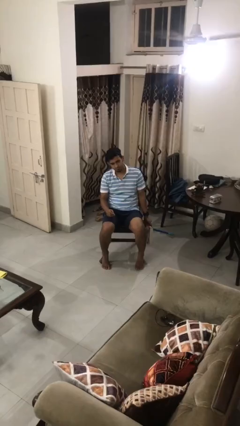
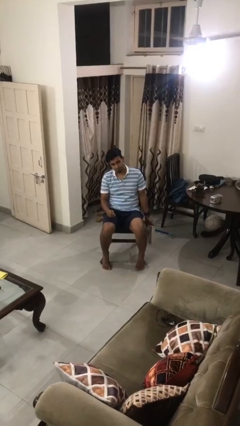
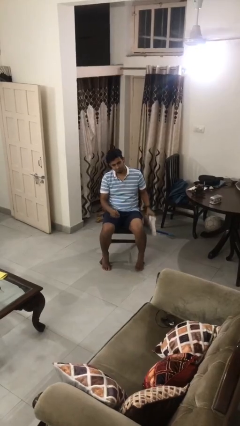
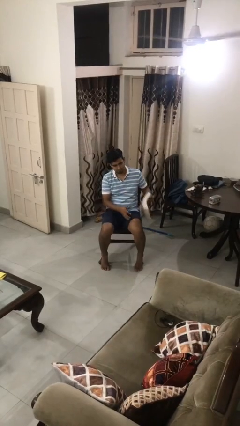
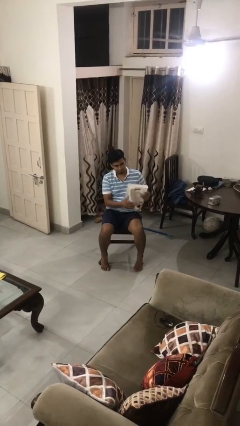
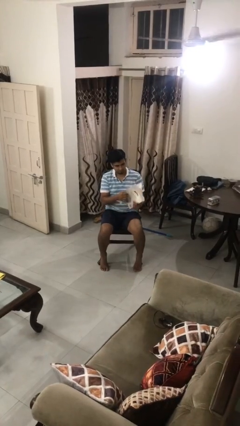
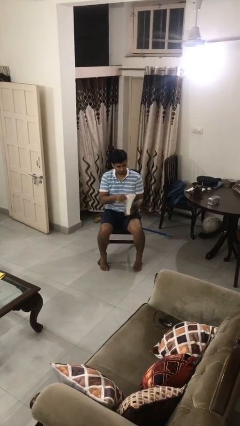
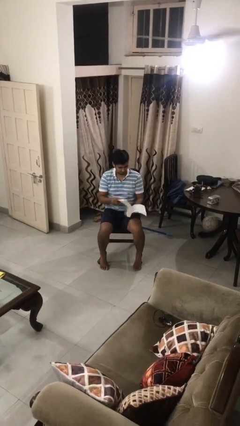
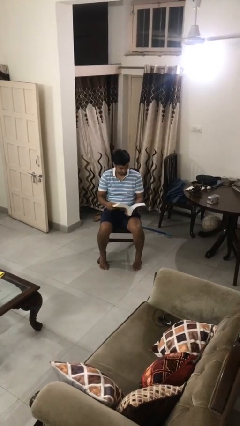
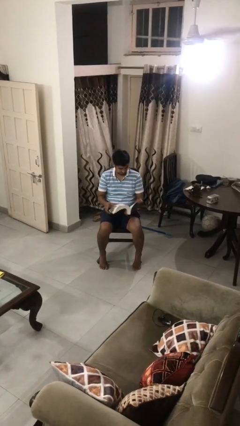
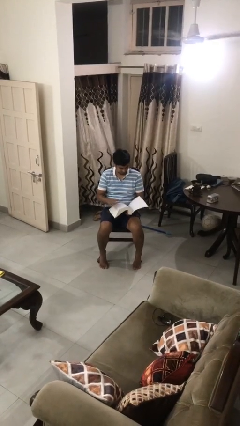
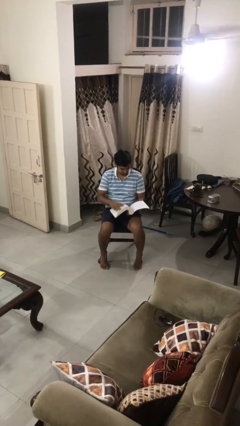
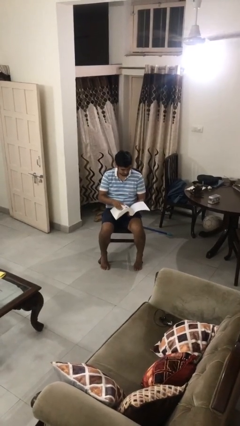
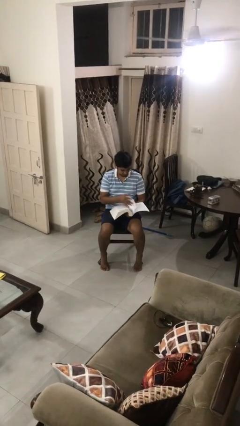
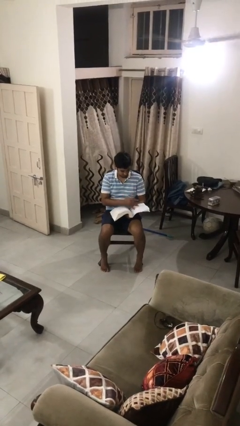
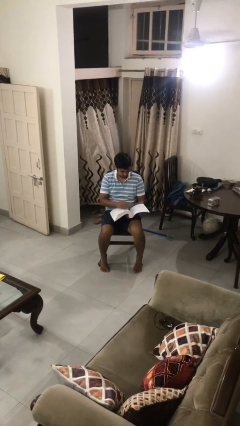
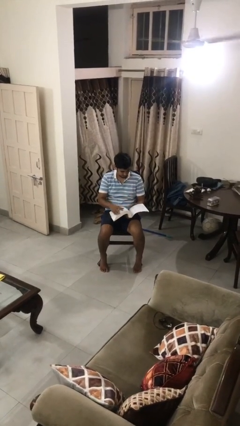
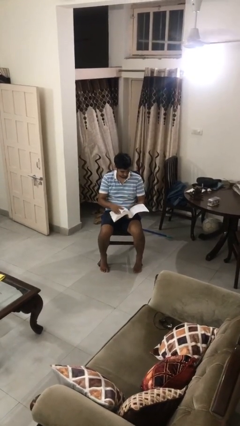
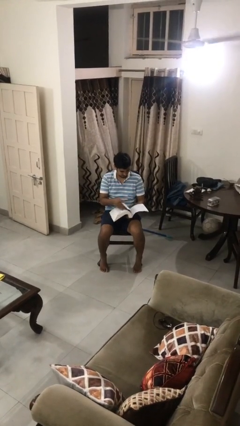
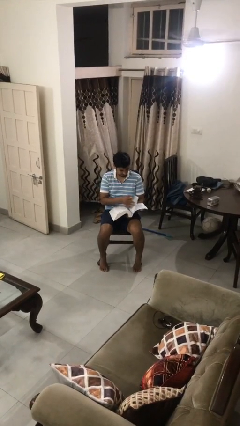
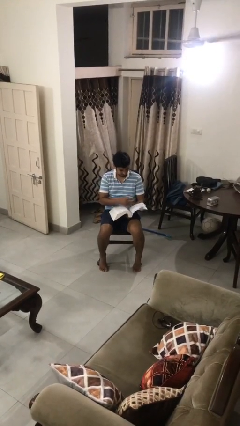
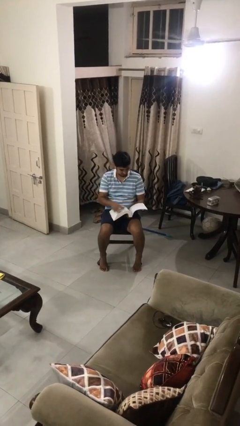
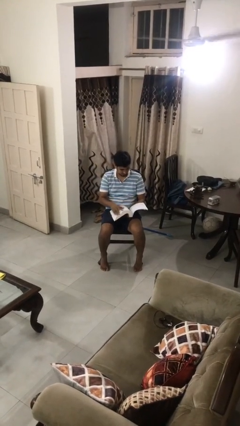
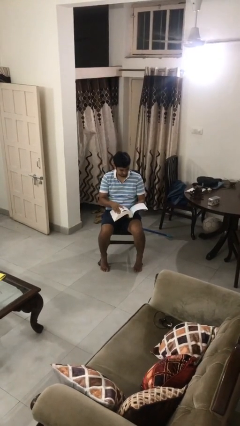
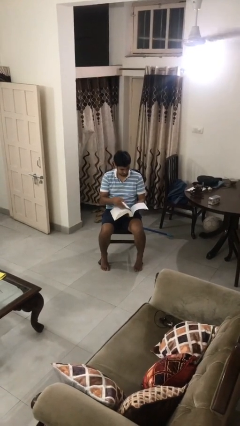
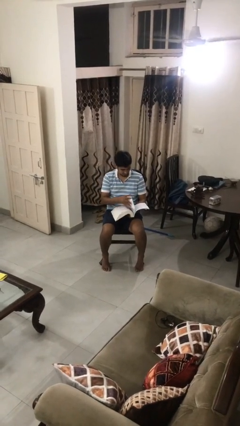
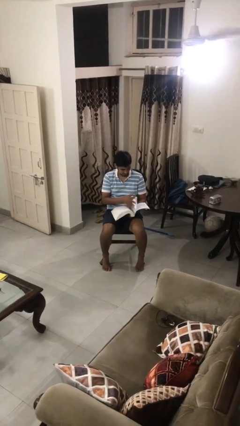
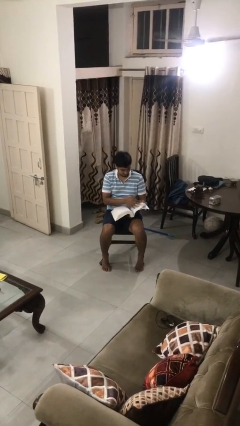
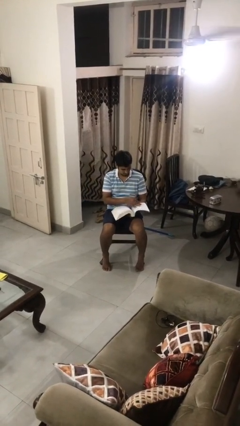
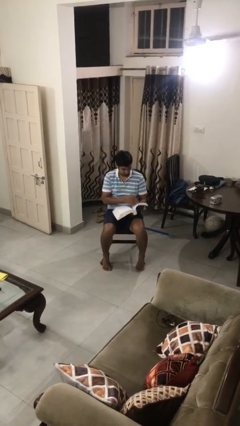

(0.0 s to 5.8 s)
person reads book

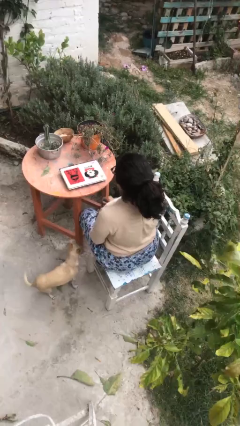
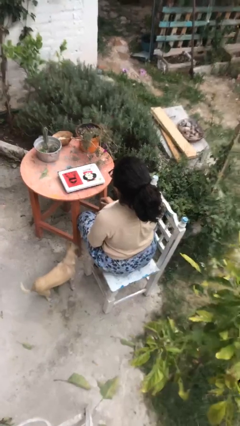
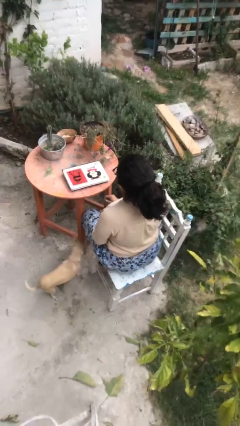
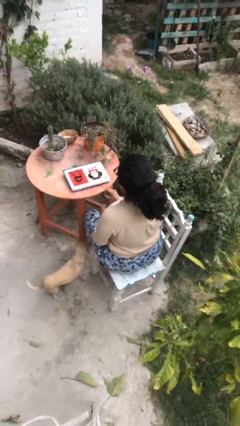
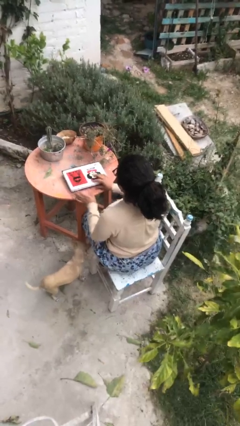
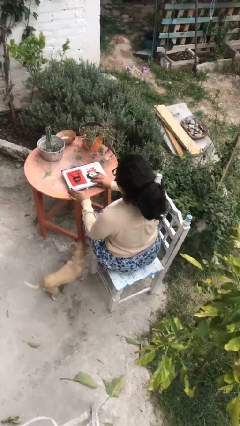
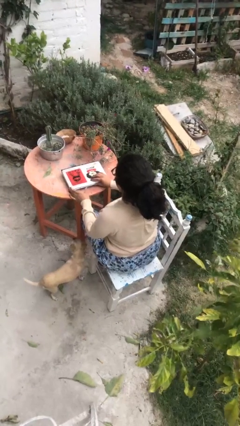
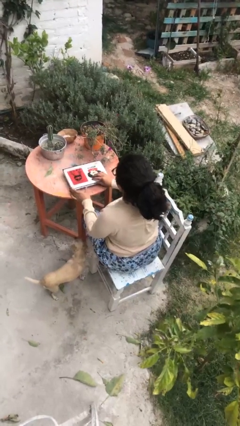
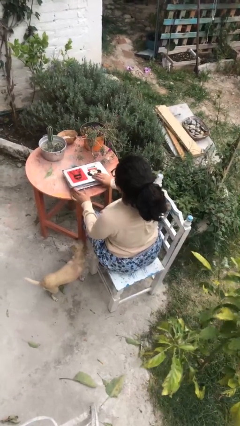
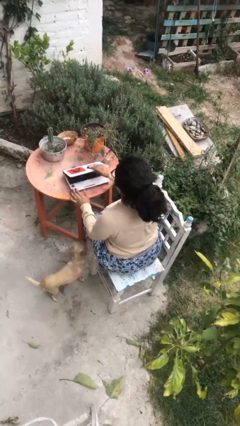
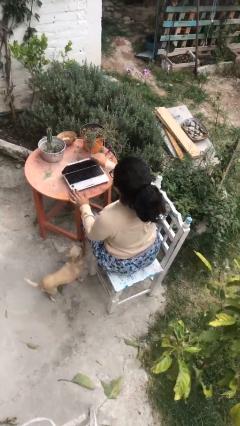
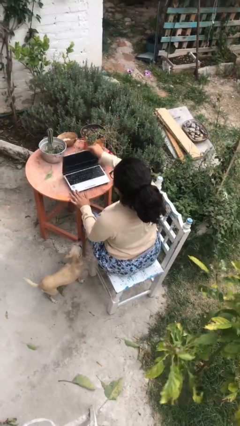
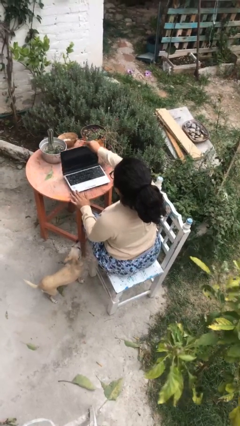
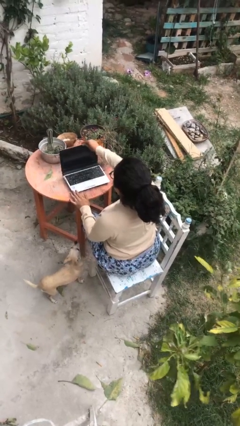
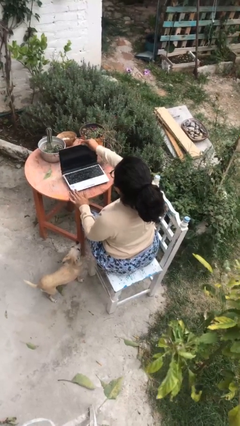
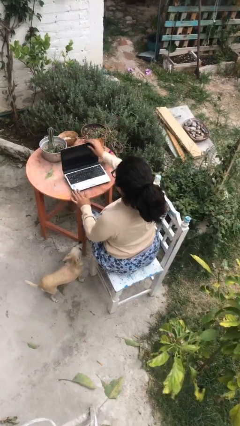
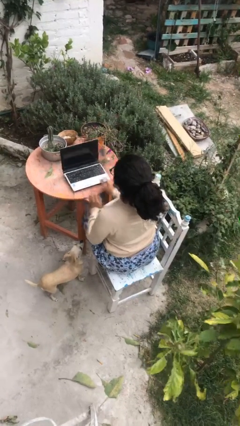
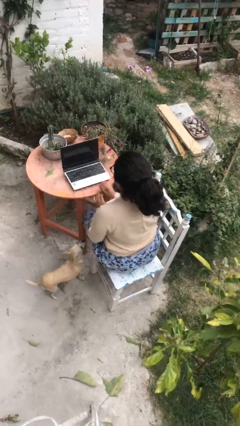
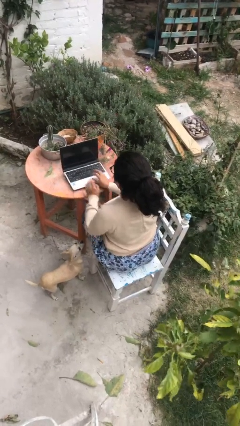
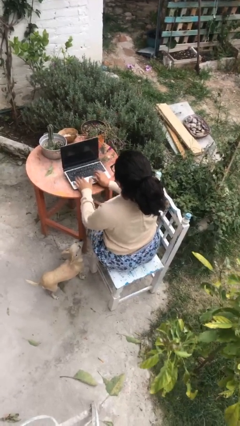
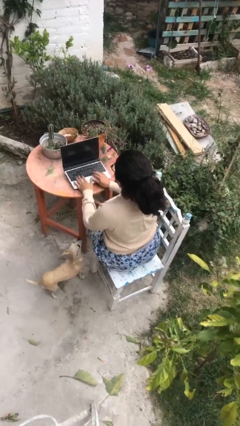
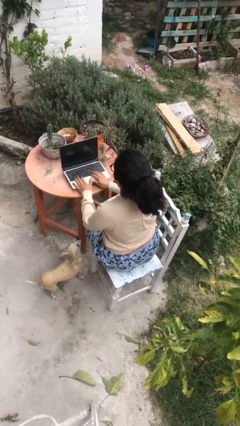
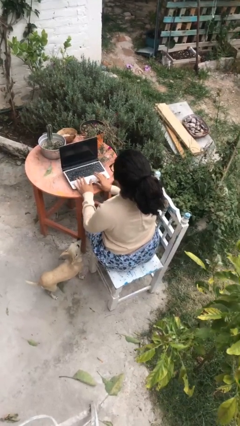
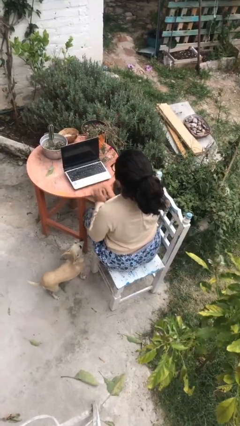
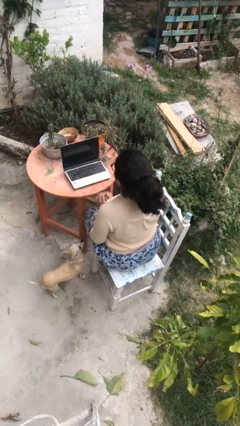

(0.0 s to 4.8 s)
person opens laptop

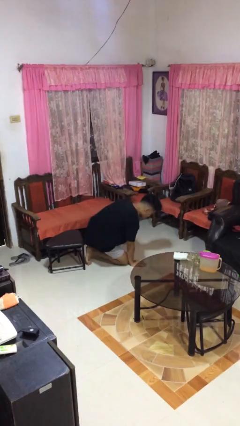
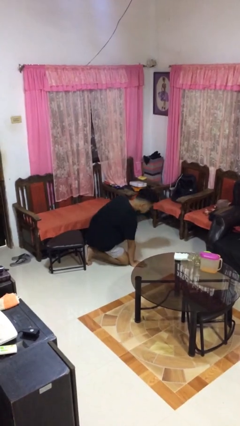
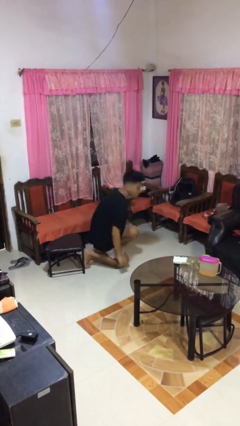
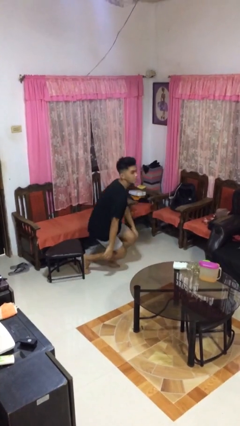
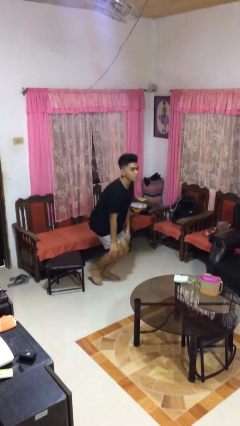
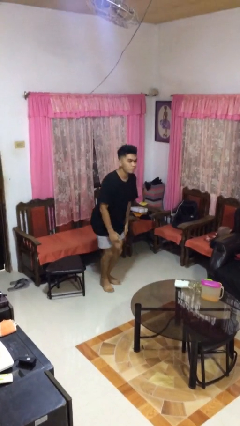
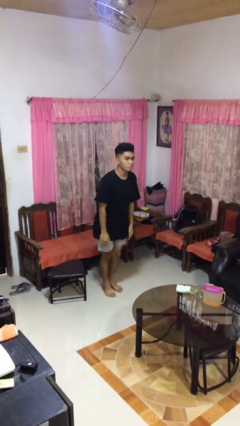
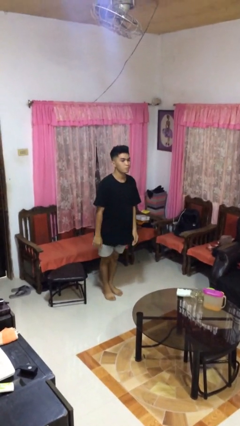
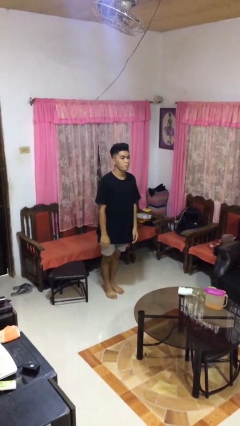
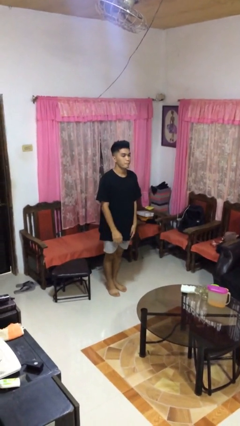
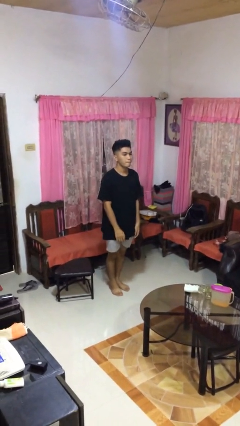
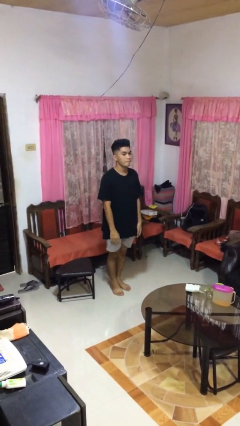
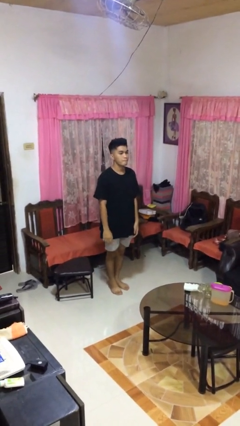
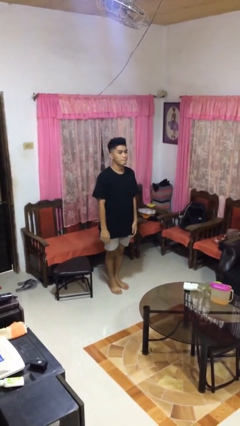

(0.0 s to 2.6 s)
person stands up from floor

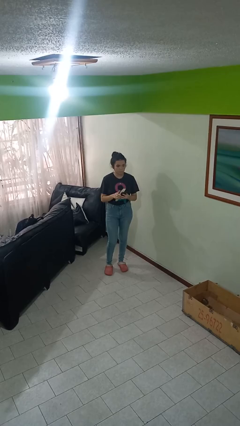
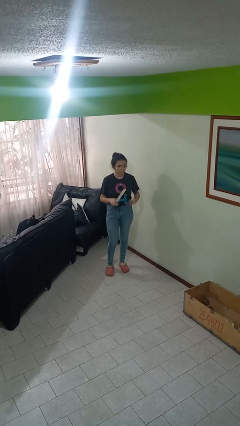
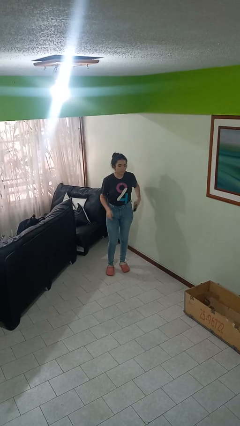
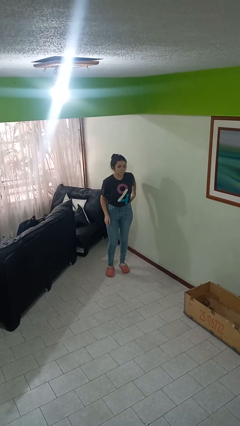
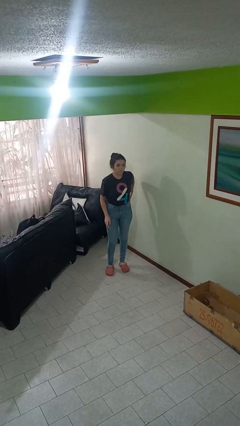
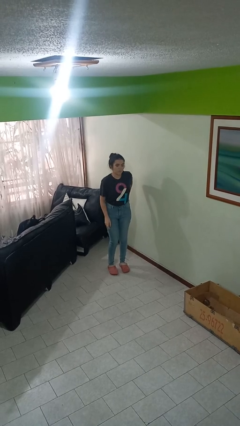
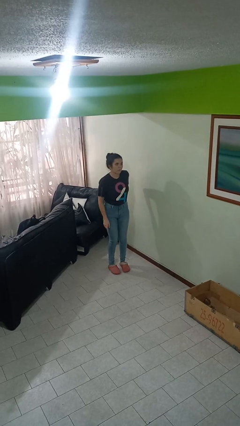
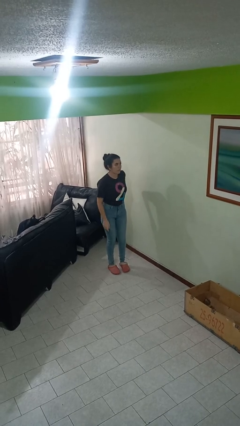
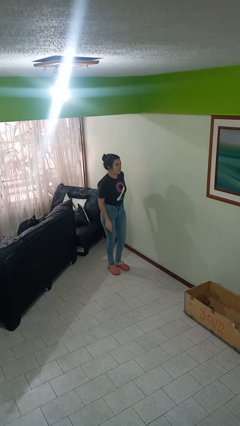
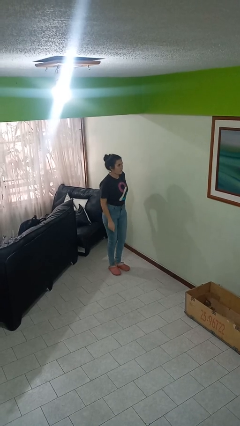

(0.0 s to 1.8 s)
person puts phone into pocket

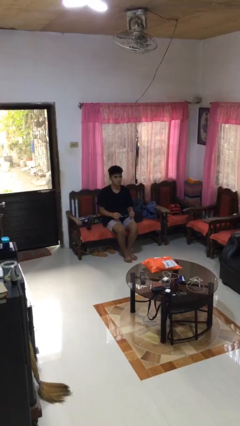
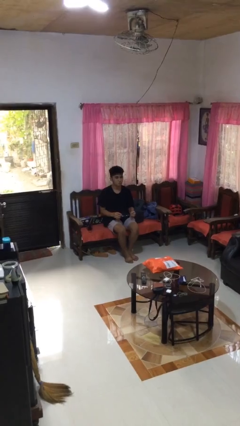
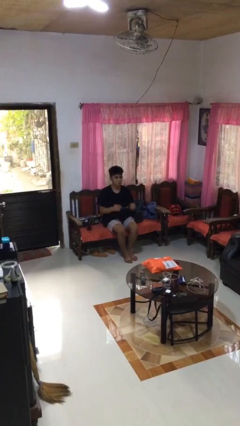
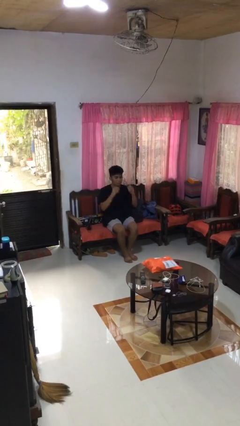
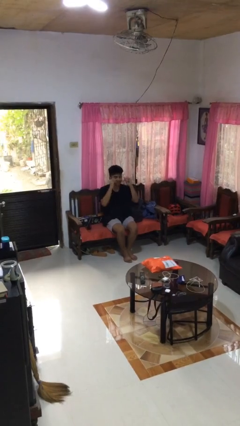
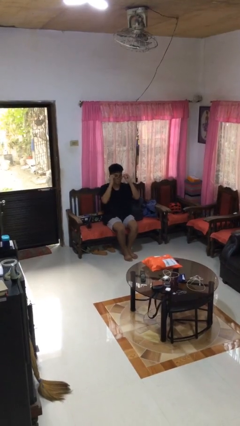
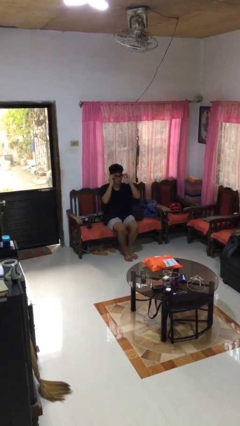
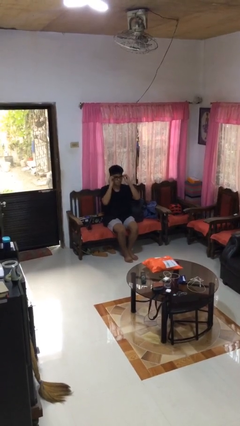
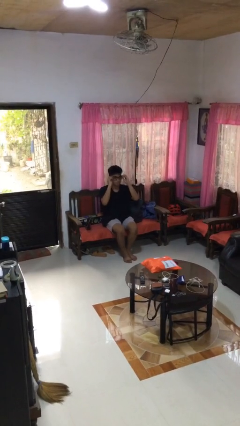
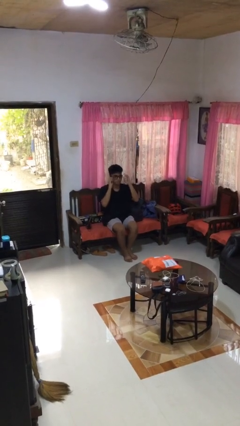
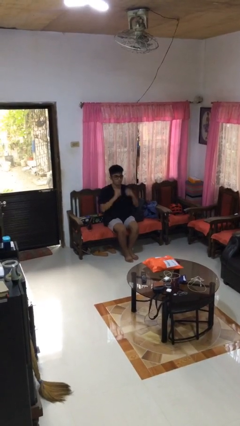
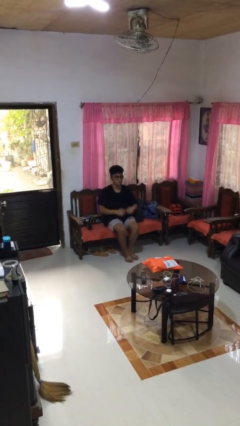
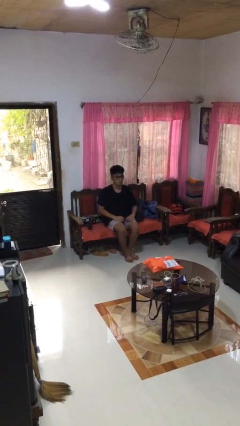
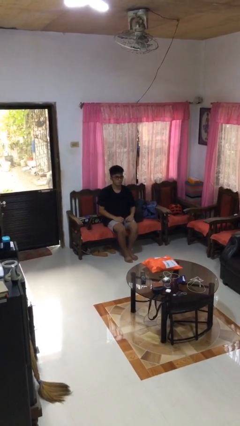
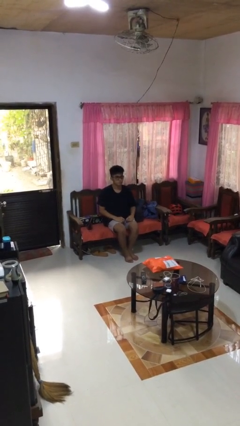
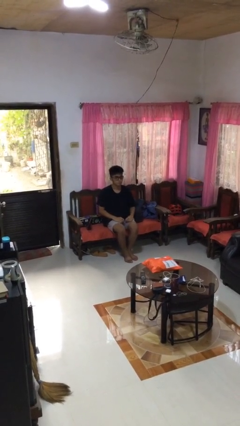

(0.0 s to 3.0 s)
person puts on glasses
